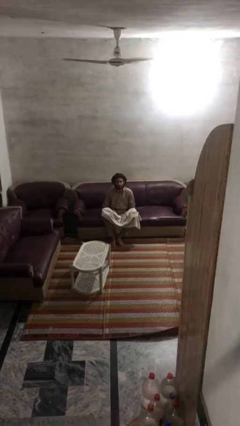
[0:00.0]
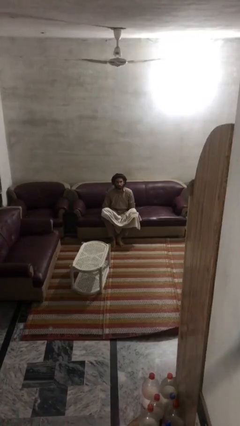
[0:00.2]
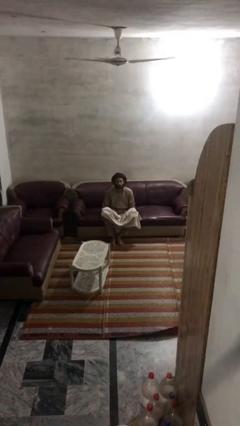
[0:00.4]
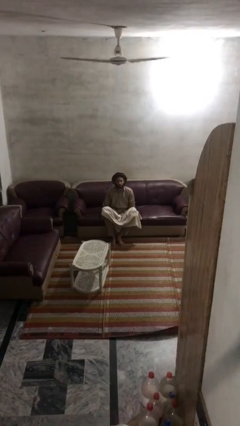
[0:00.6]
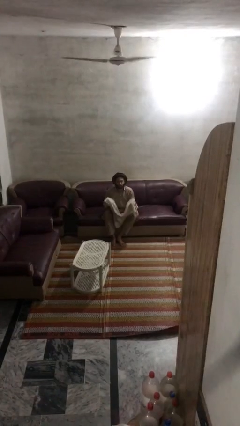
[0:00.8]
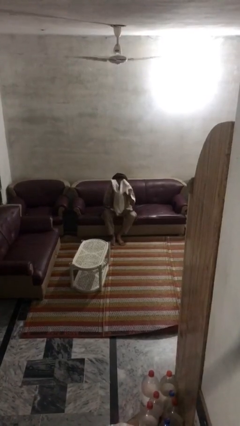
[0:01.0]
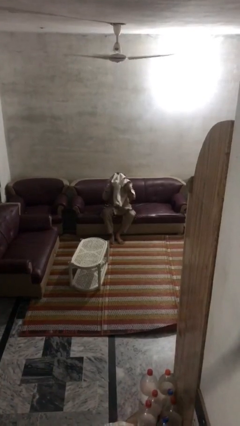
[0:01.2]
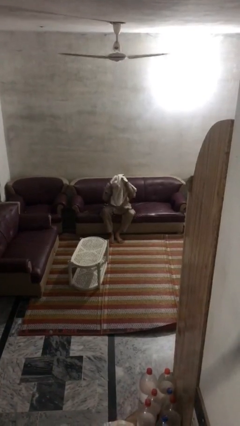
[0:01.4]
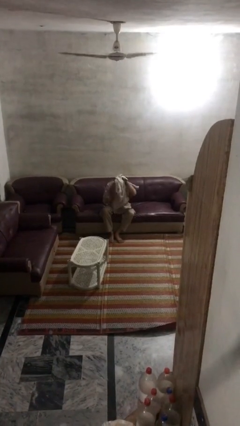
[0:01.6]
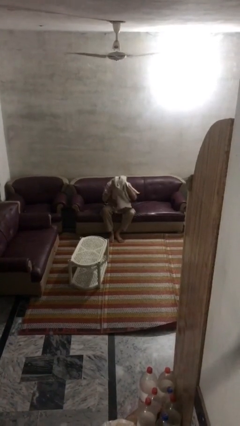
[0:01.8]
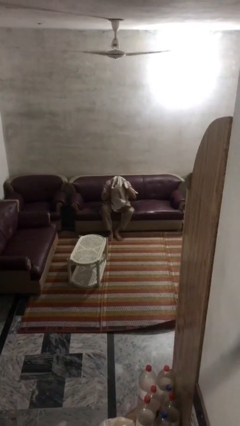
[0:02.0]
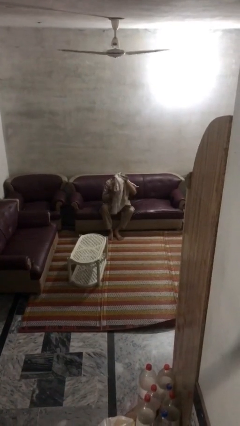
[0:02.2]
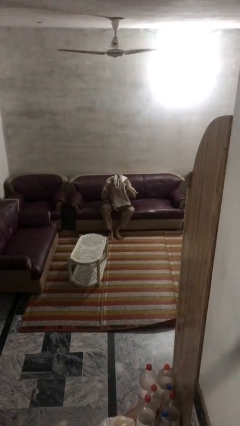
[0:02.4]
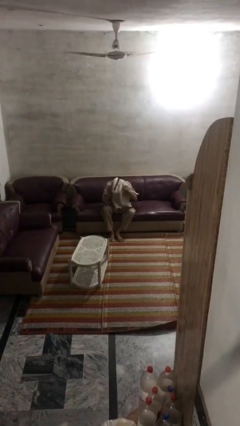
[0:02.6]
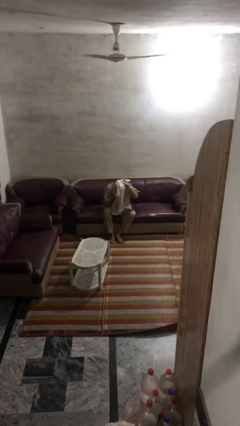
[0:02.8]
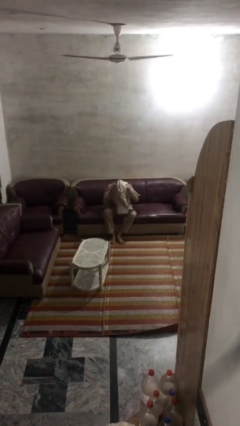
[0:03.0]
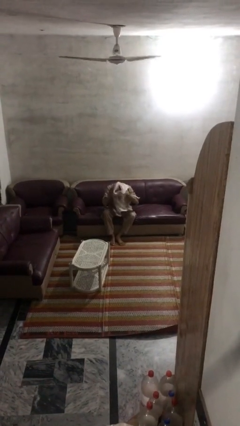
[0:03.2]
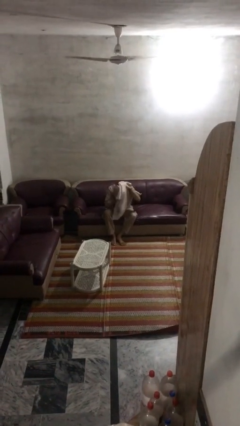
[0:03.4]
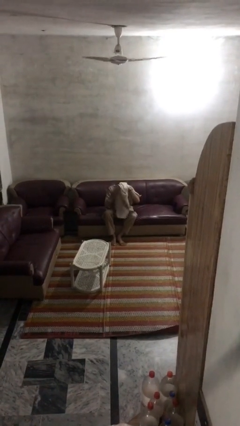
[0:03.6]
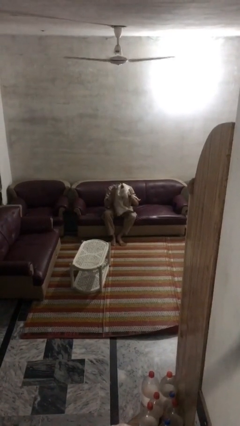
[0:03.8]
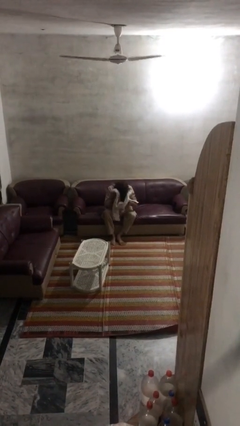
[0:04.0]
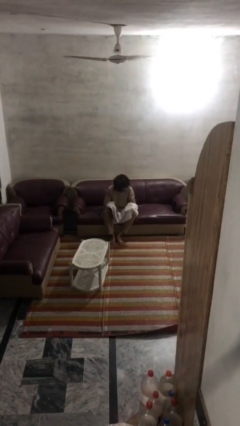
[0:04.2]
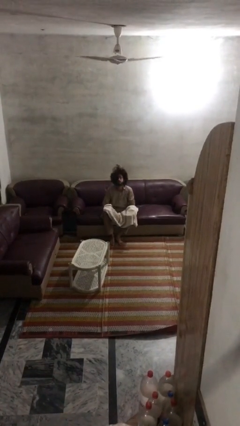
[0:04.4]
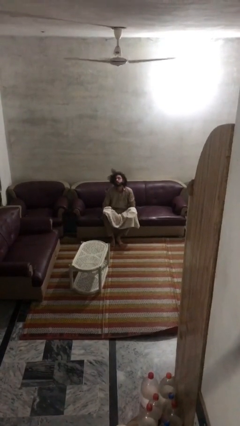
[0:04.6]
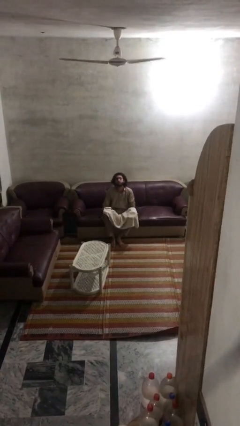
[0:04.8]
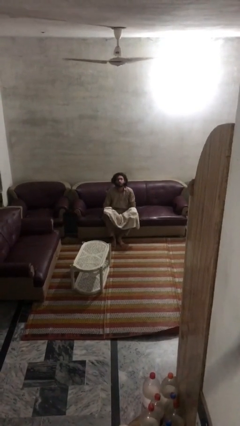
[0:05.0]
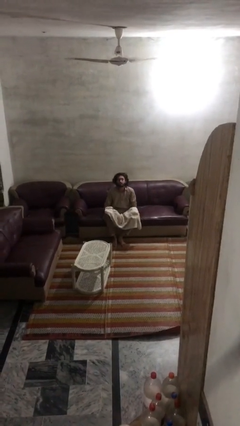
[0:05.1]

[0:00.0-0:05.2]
person dries hair with towel

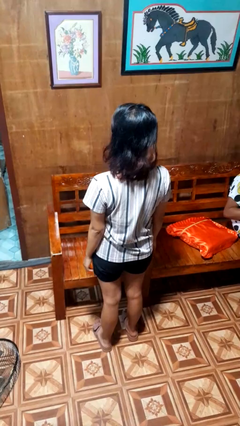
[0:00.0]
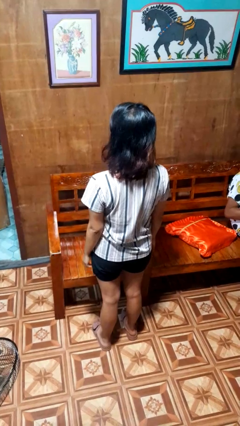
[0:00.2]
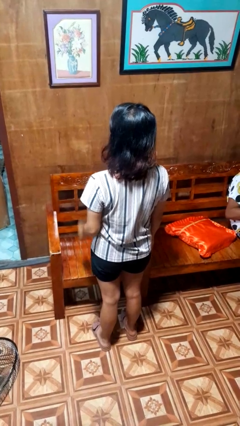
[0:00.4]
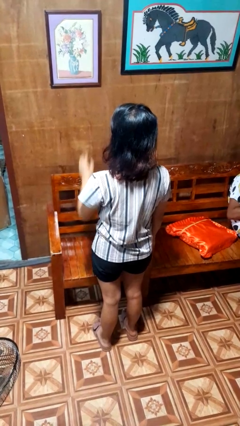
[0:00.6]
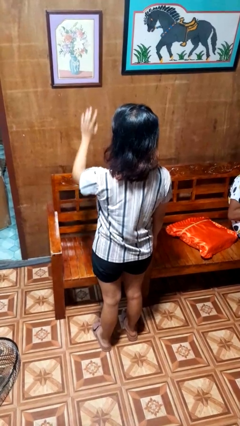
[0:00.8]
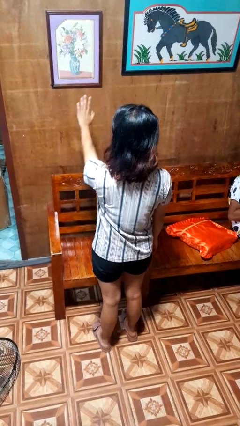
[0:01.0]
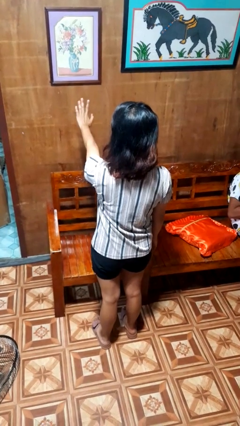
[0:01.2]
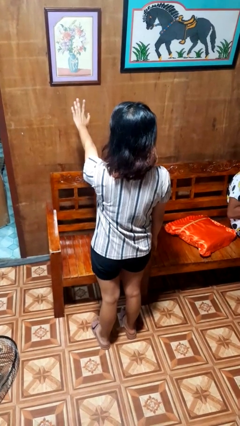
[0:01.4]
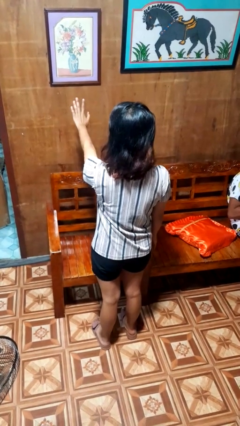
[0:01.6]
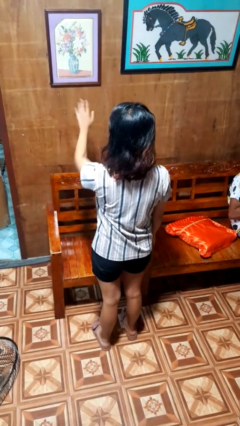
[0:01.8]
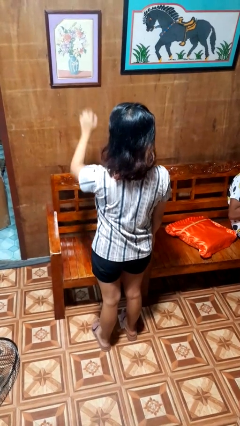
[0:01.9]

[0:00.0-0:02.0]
person gestures stop

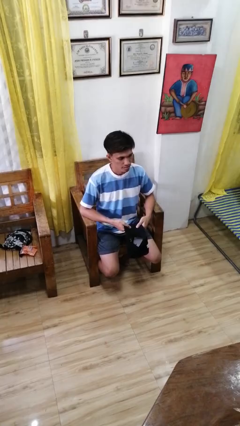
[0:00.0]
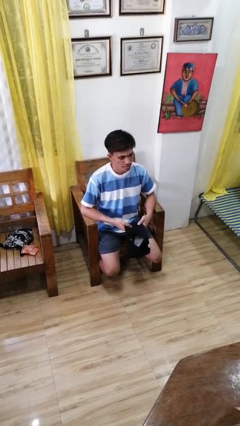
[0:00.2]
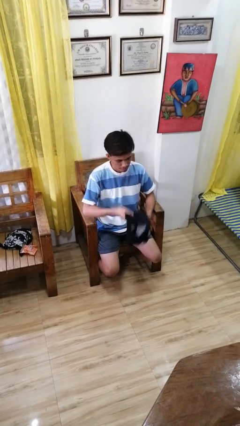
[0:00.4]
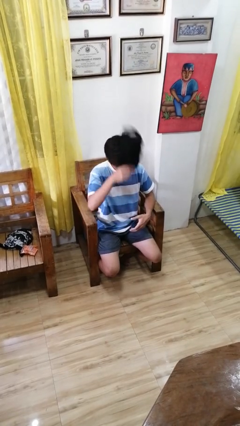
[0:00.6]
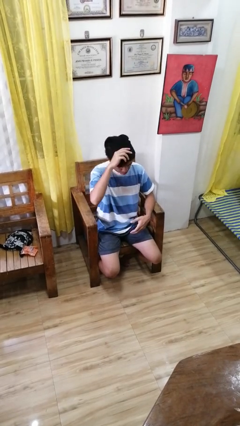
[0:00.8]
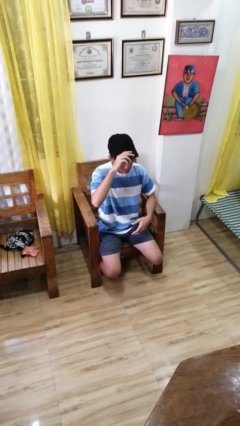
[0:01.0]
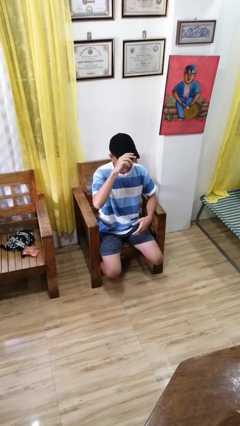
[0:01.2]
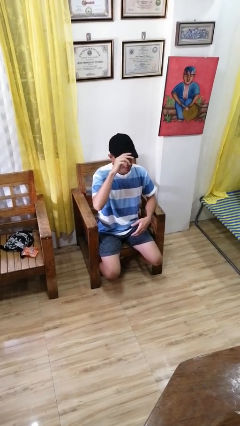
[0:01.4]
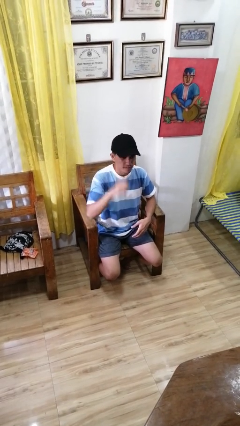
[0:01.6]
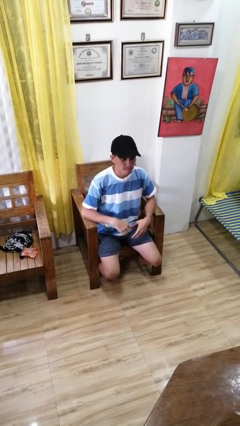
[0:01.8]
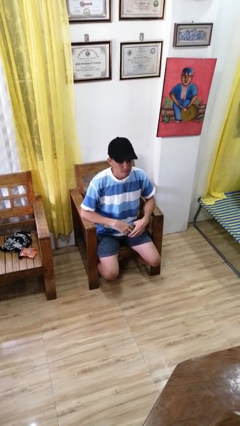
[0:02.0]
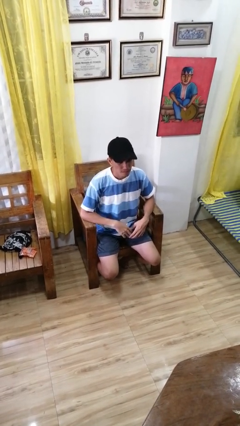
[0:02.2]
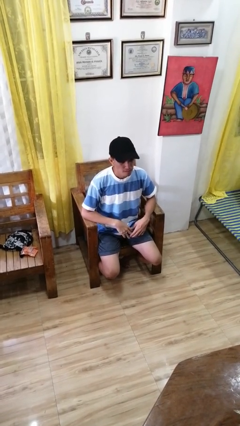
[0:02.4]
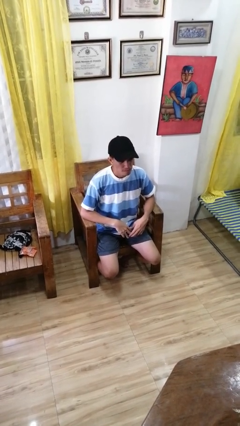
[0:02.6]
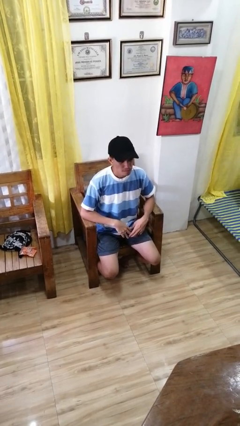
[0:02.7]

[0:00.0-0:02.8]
person puts on hat

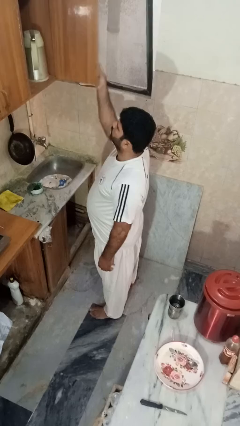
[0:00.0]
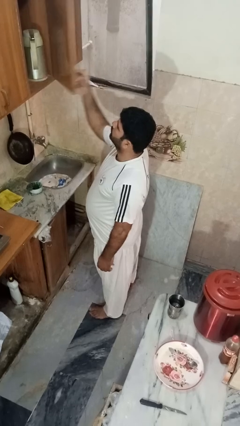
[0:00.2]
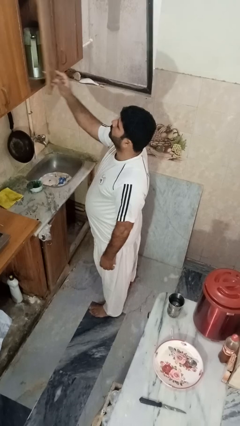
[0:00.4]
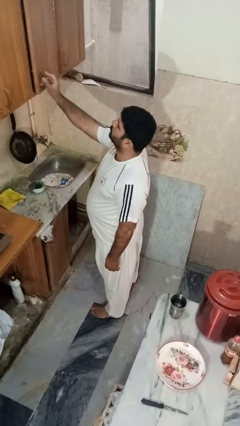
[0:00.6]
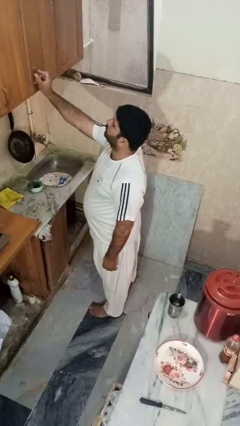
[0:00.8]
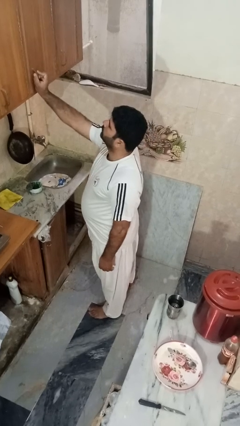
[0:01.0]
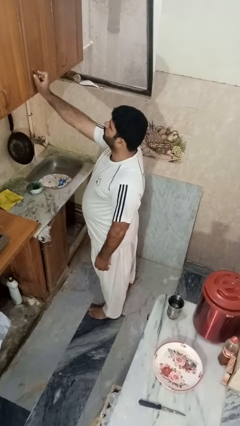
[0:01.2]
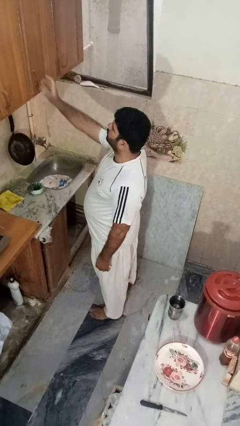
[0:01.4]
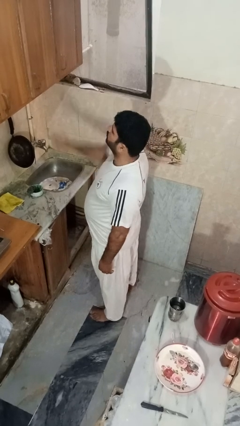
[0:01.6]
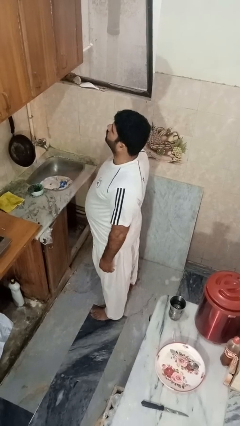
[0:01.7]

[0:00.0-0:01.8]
person closes cabinet

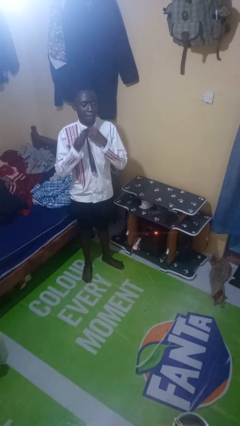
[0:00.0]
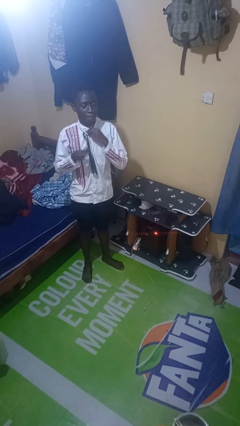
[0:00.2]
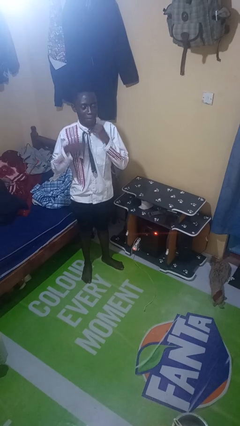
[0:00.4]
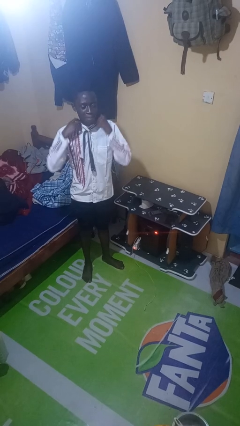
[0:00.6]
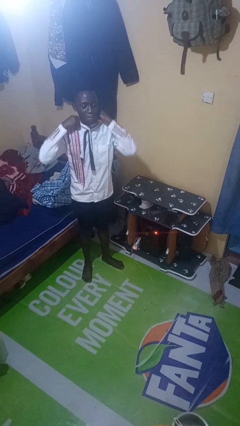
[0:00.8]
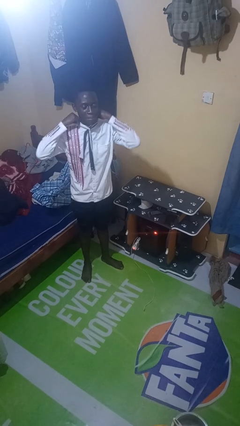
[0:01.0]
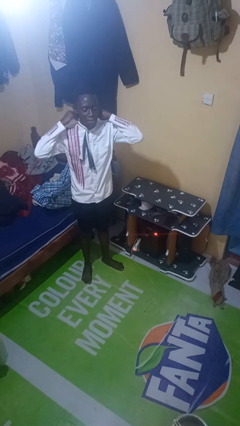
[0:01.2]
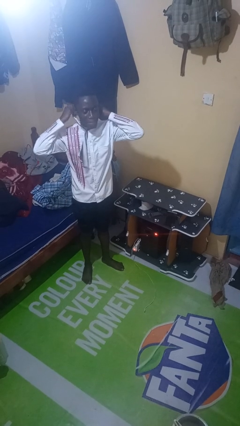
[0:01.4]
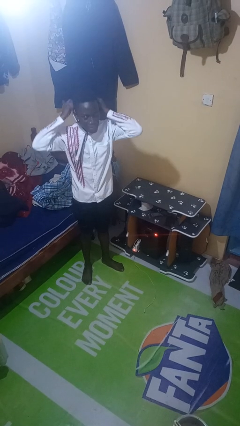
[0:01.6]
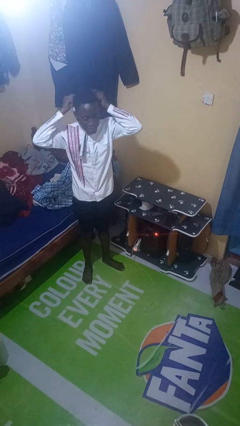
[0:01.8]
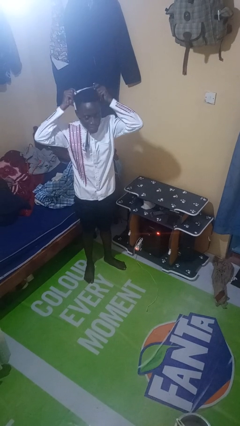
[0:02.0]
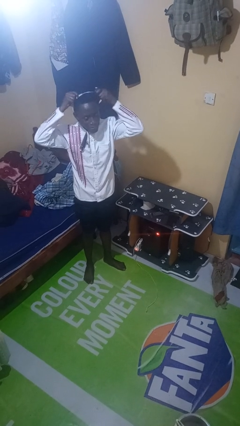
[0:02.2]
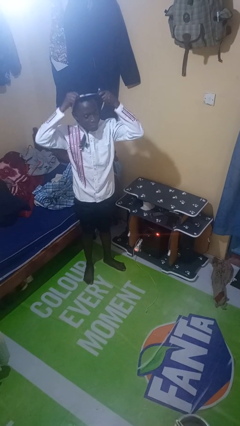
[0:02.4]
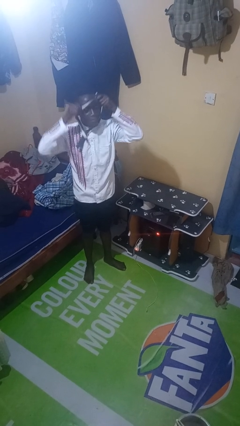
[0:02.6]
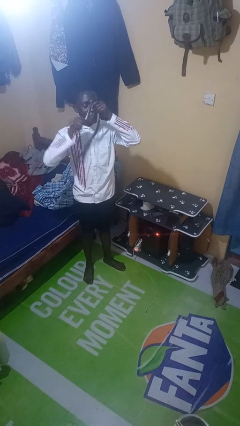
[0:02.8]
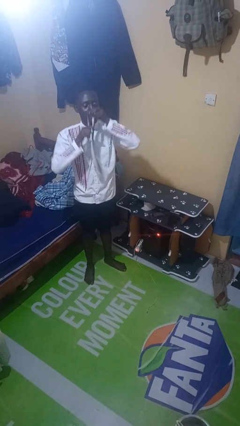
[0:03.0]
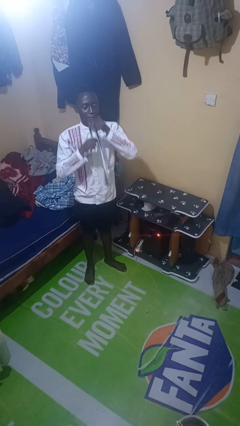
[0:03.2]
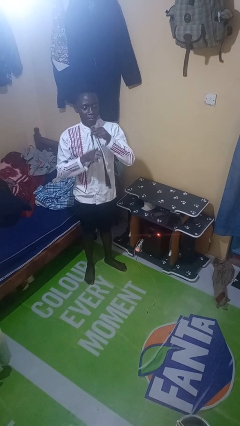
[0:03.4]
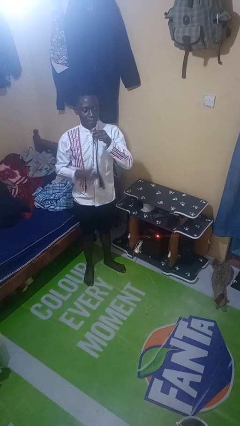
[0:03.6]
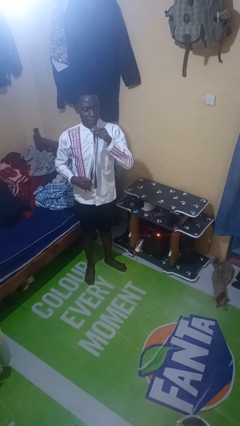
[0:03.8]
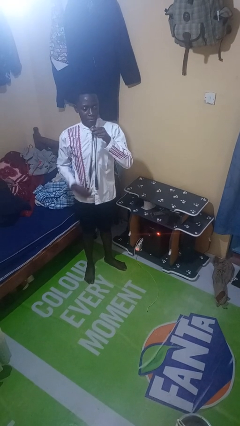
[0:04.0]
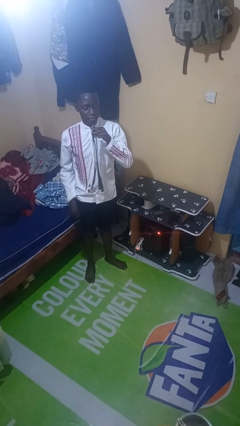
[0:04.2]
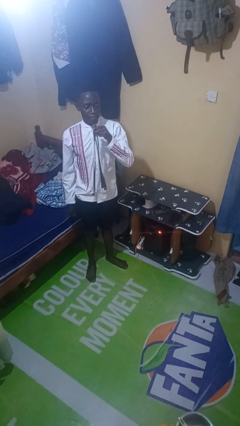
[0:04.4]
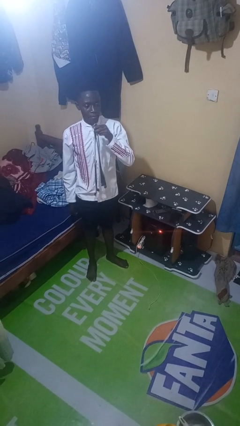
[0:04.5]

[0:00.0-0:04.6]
person takes off necktie

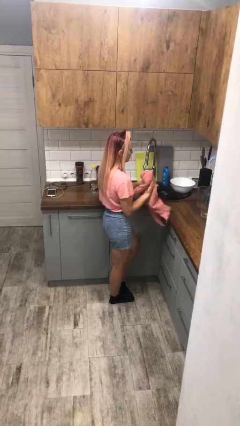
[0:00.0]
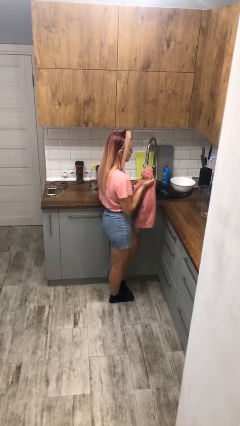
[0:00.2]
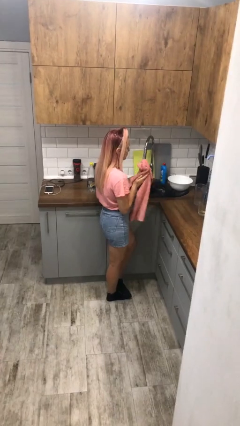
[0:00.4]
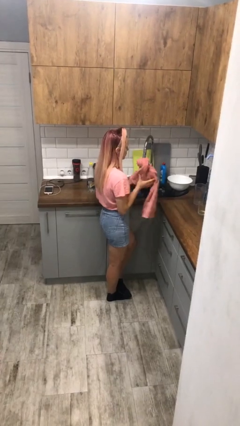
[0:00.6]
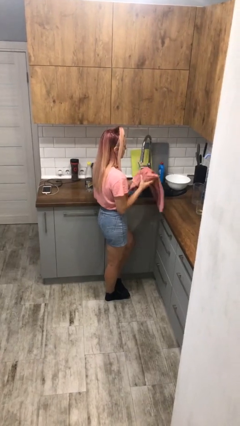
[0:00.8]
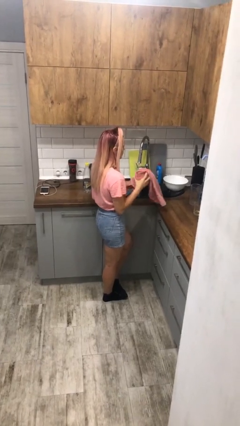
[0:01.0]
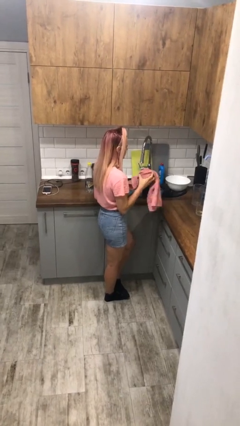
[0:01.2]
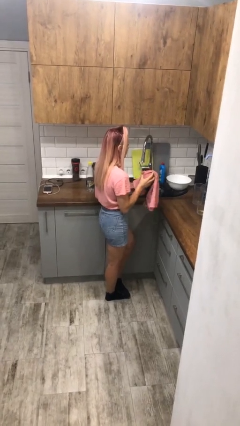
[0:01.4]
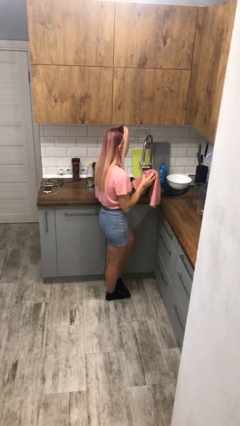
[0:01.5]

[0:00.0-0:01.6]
person dries hands with towel
